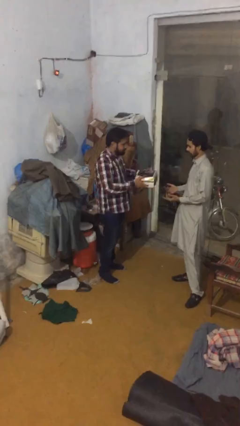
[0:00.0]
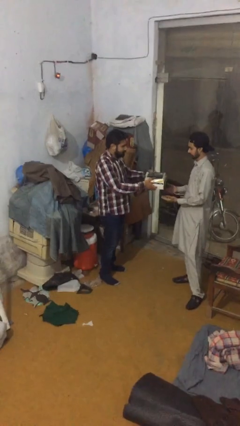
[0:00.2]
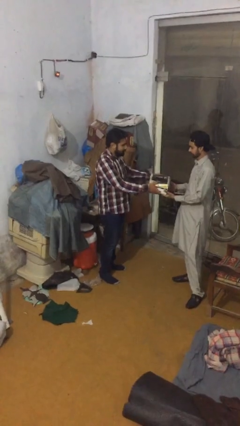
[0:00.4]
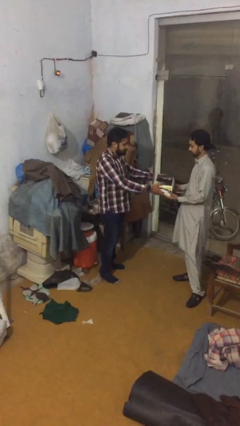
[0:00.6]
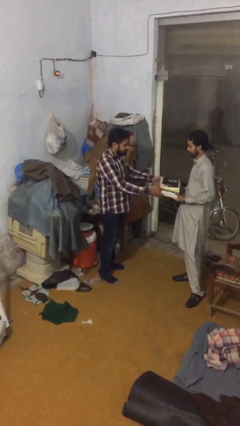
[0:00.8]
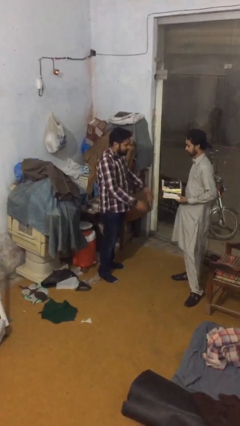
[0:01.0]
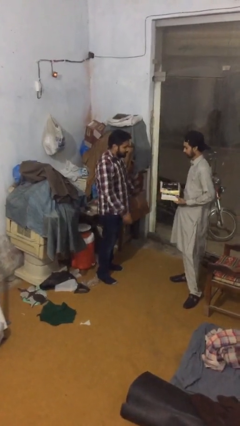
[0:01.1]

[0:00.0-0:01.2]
person transfers object to person

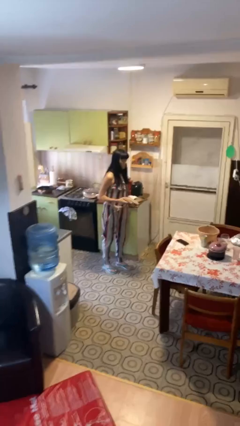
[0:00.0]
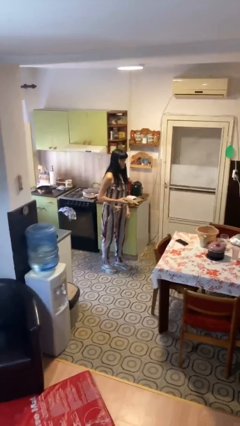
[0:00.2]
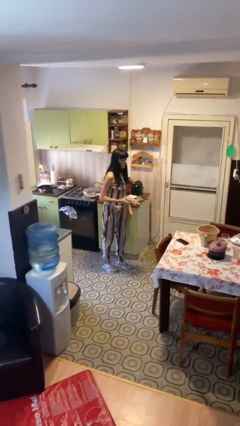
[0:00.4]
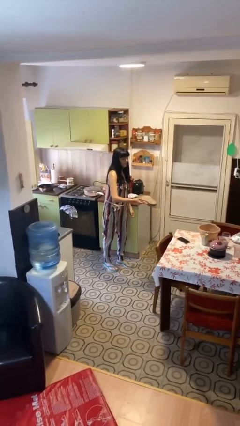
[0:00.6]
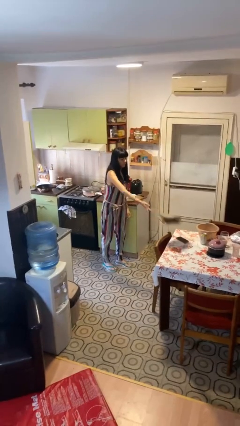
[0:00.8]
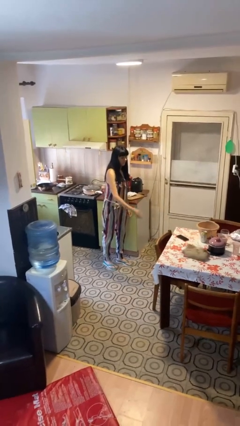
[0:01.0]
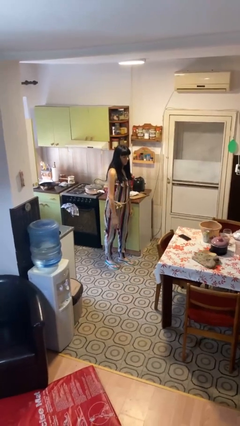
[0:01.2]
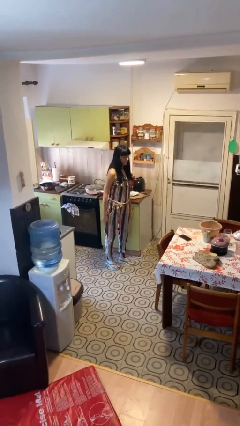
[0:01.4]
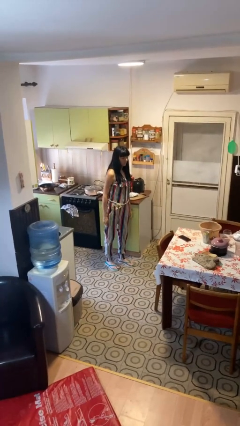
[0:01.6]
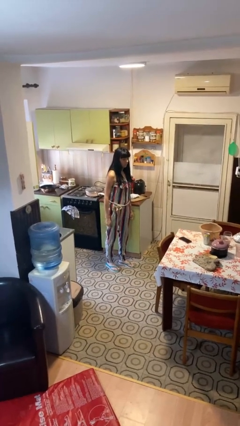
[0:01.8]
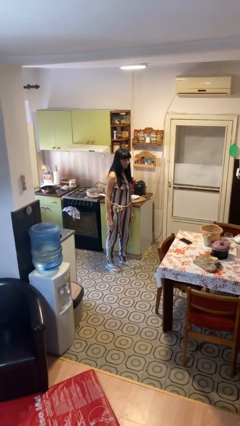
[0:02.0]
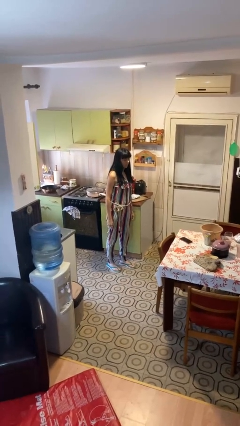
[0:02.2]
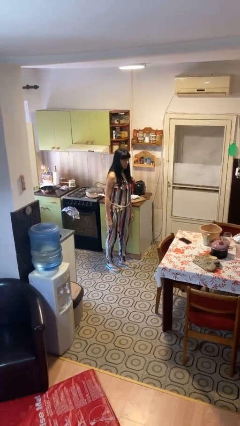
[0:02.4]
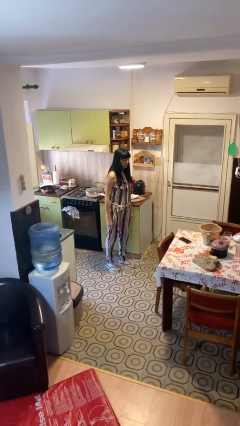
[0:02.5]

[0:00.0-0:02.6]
person throws object on table

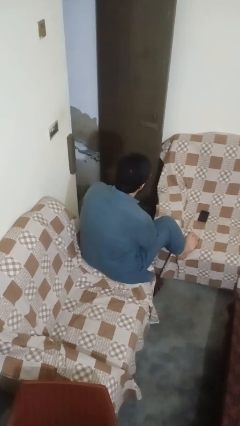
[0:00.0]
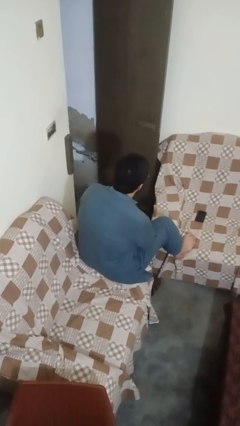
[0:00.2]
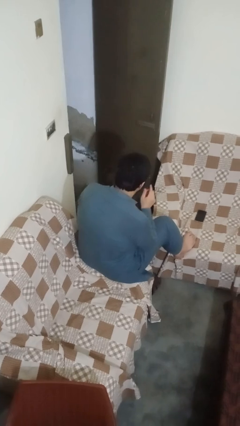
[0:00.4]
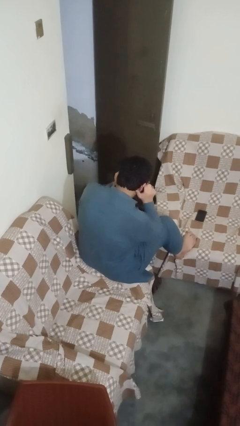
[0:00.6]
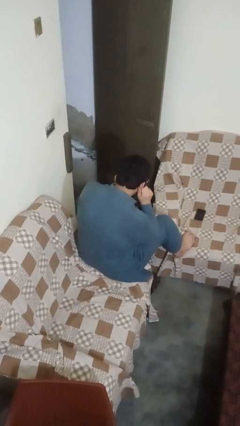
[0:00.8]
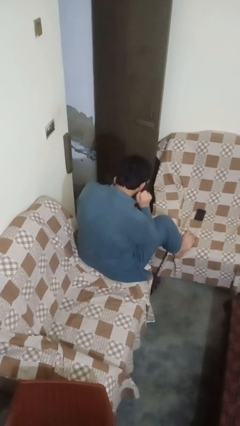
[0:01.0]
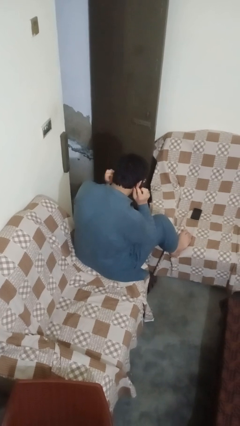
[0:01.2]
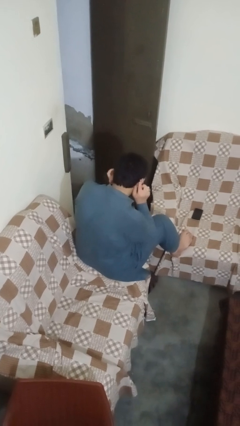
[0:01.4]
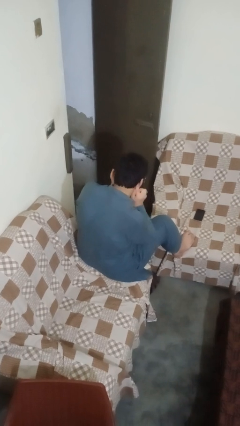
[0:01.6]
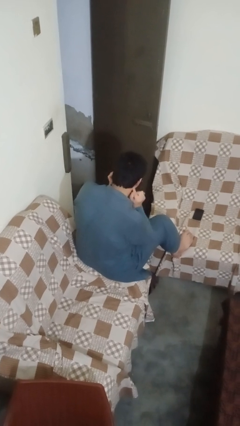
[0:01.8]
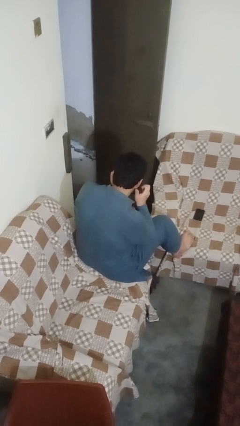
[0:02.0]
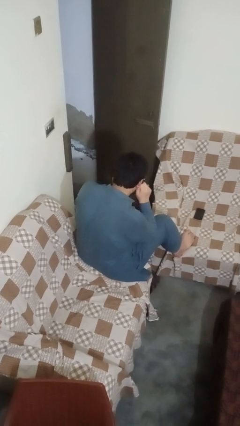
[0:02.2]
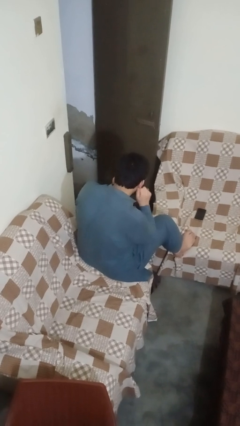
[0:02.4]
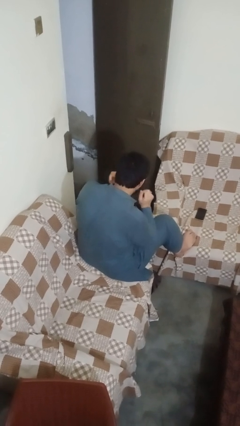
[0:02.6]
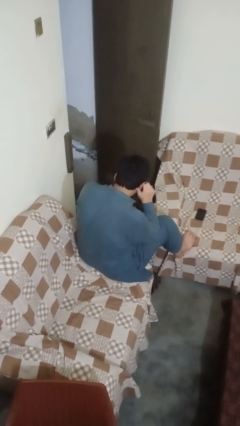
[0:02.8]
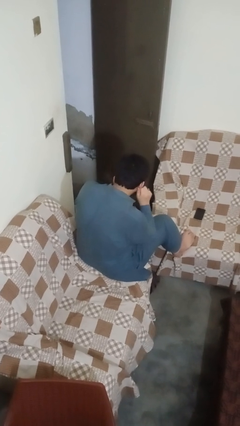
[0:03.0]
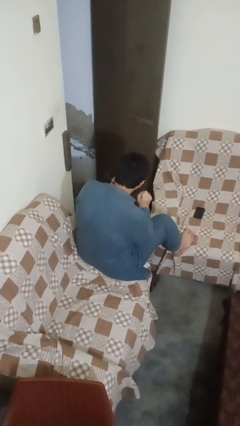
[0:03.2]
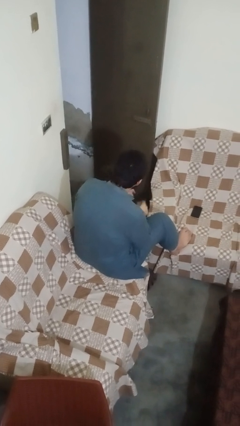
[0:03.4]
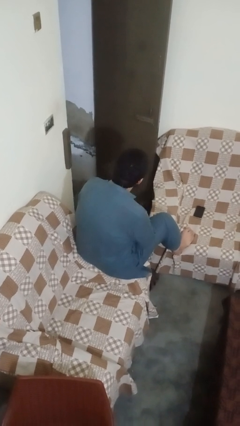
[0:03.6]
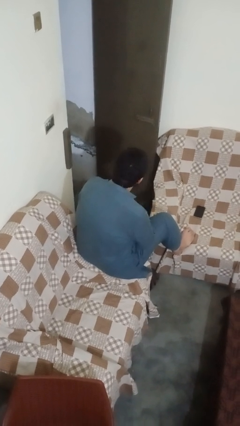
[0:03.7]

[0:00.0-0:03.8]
person touches earlobe

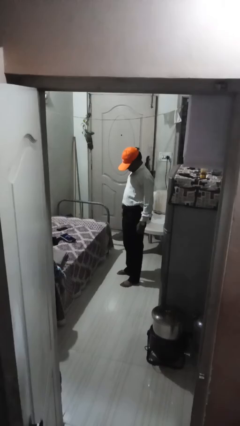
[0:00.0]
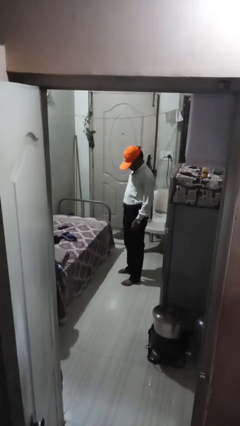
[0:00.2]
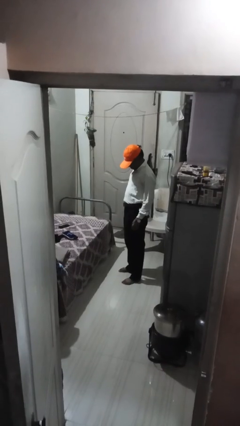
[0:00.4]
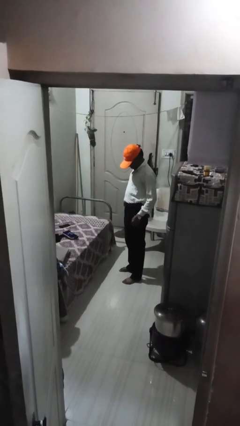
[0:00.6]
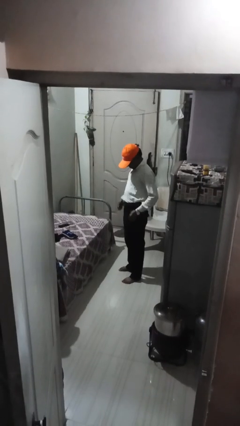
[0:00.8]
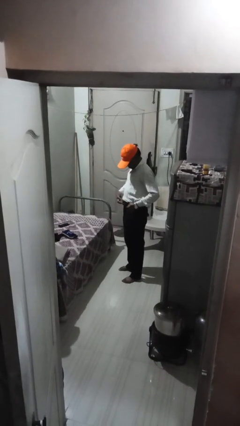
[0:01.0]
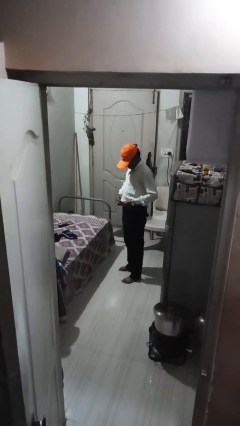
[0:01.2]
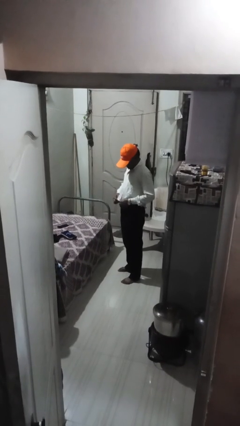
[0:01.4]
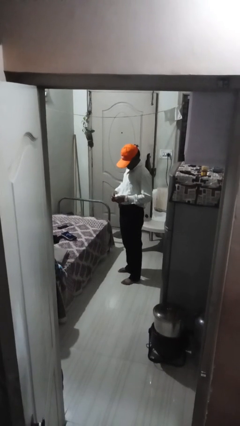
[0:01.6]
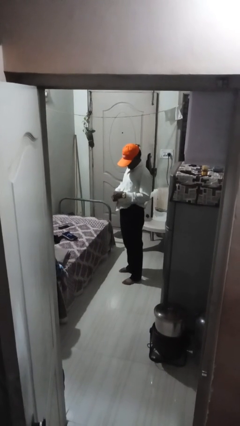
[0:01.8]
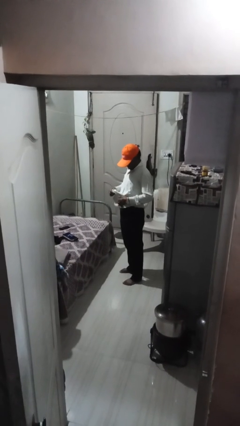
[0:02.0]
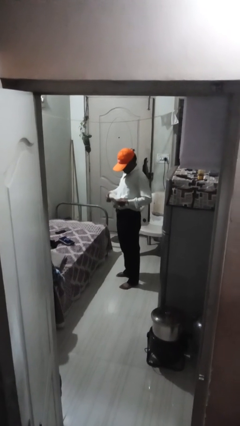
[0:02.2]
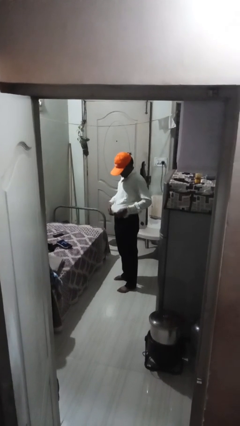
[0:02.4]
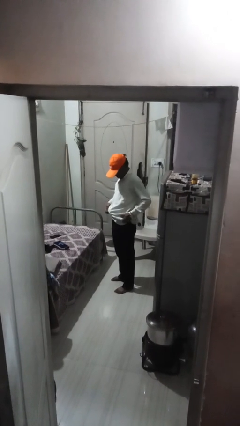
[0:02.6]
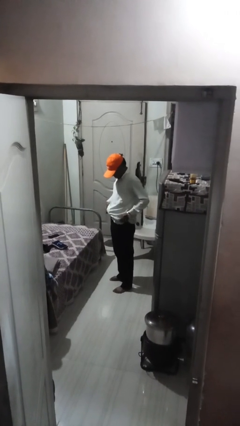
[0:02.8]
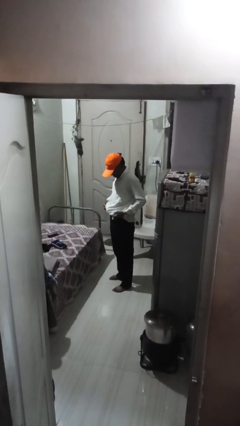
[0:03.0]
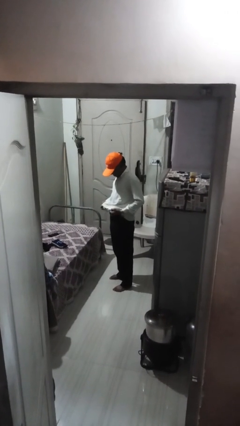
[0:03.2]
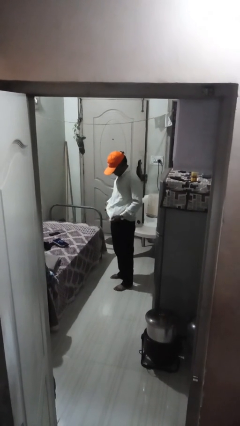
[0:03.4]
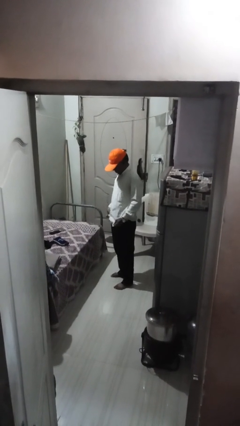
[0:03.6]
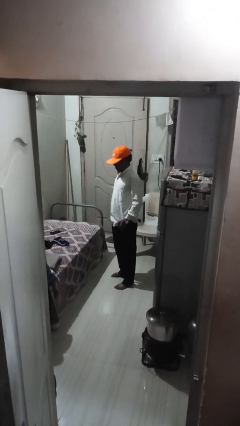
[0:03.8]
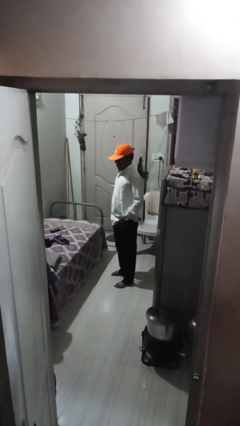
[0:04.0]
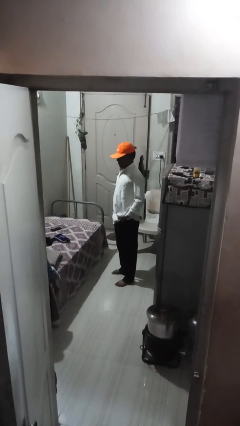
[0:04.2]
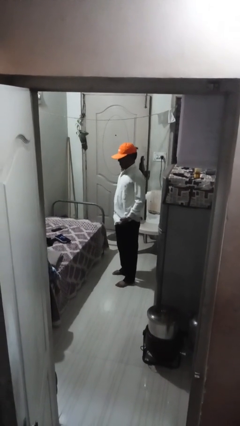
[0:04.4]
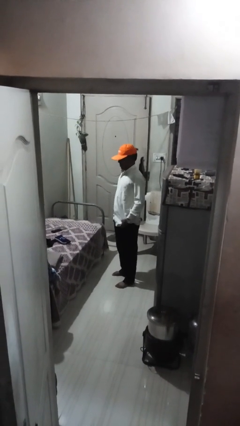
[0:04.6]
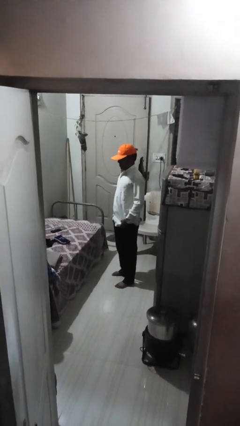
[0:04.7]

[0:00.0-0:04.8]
person untucks shirt

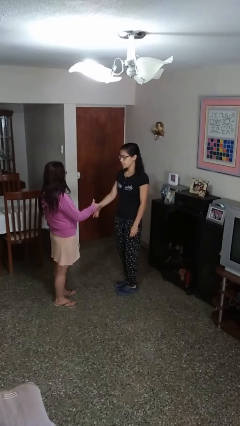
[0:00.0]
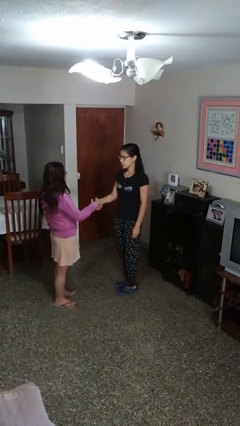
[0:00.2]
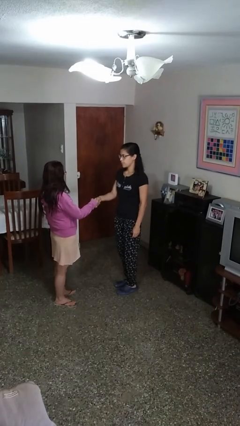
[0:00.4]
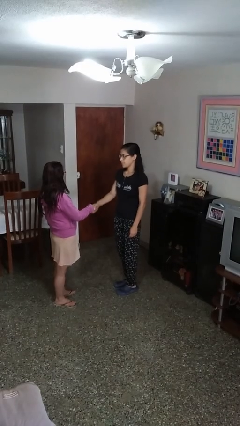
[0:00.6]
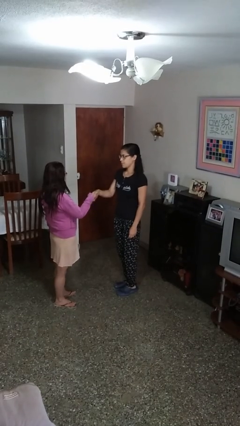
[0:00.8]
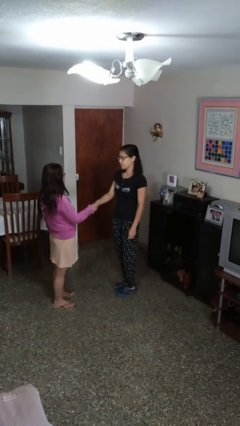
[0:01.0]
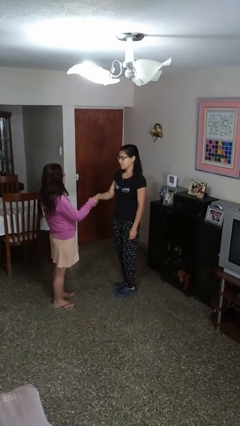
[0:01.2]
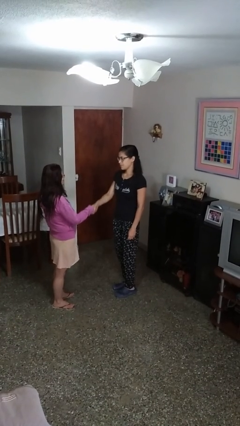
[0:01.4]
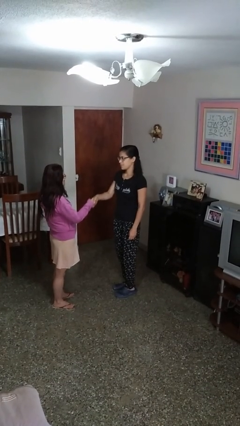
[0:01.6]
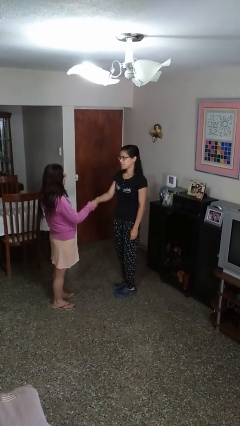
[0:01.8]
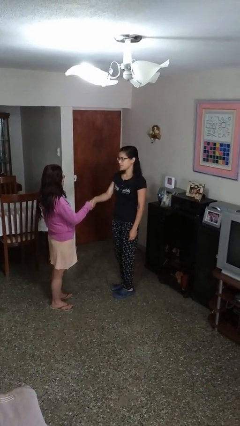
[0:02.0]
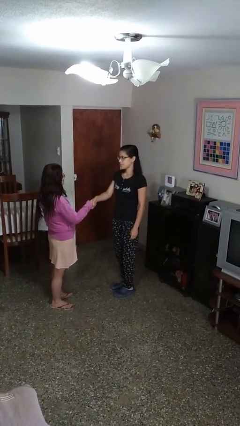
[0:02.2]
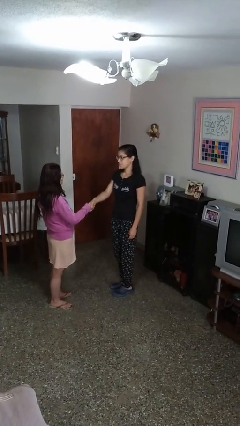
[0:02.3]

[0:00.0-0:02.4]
person highfives hand

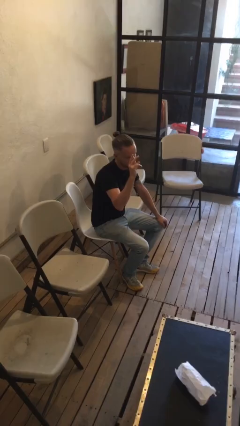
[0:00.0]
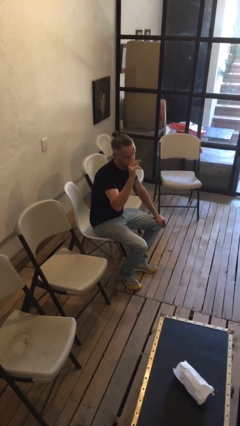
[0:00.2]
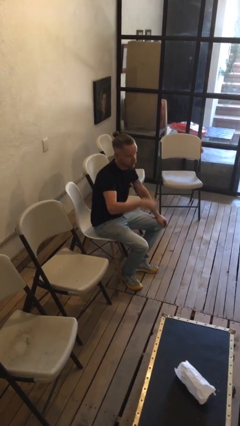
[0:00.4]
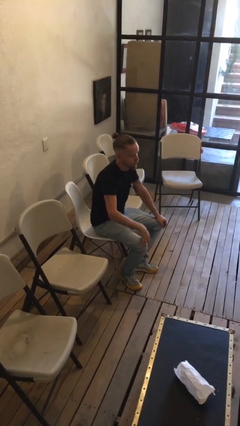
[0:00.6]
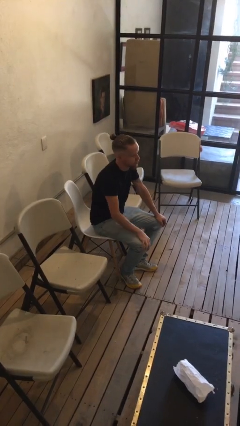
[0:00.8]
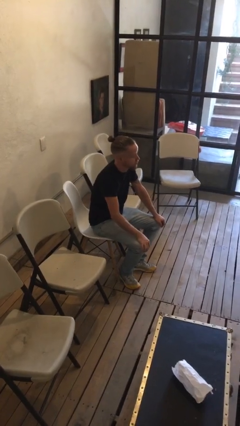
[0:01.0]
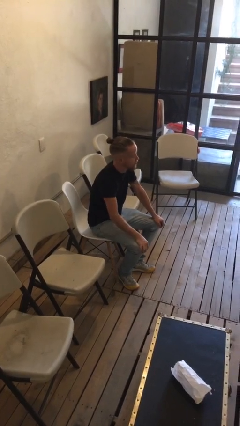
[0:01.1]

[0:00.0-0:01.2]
person gestures lower hand

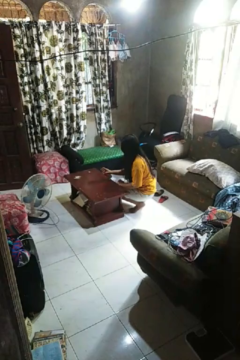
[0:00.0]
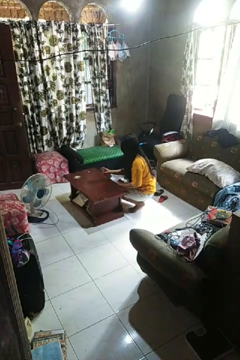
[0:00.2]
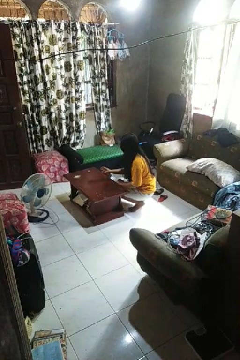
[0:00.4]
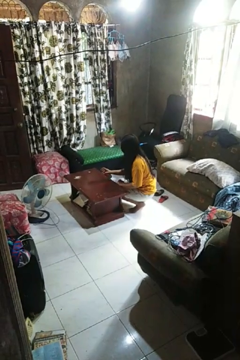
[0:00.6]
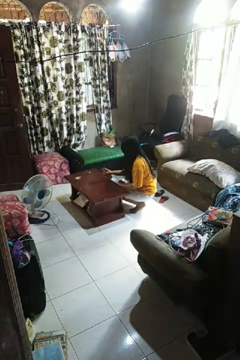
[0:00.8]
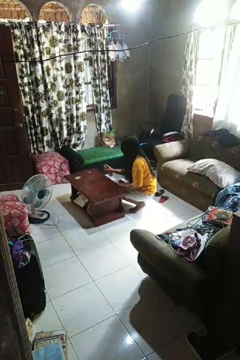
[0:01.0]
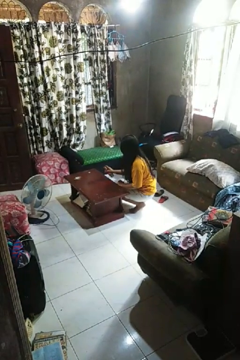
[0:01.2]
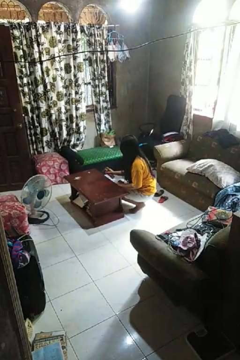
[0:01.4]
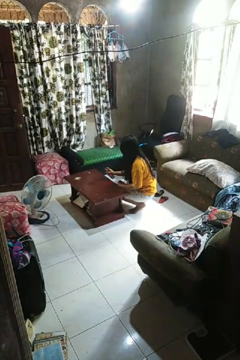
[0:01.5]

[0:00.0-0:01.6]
person sprays from bottle
